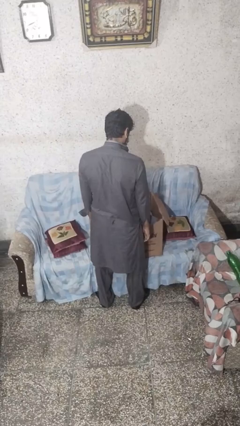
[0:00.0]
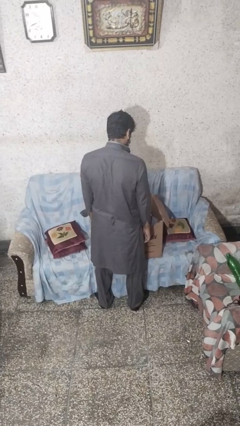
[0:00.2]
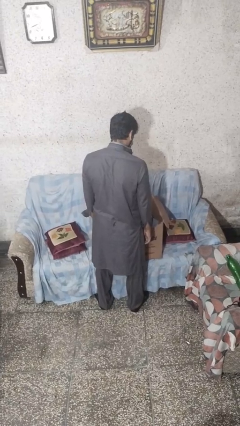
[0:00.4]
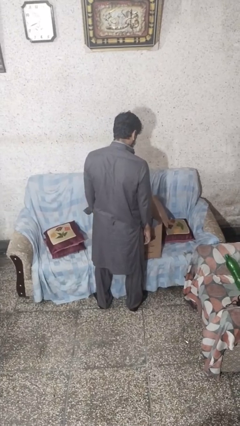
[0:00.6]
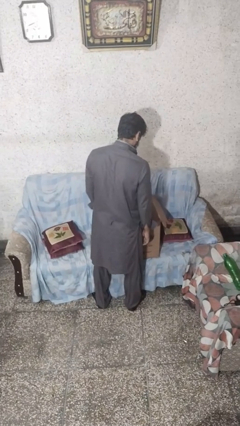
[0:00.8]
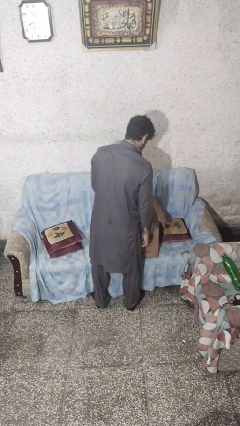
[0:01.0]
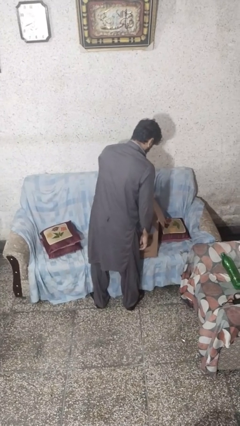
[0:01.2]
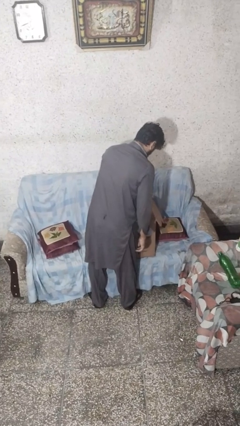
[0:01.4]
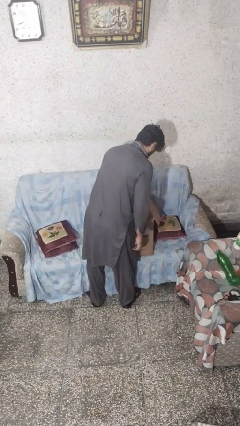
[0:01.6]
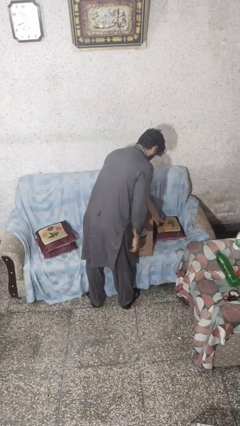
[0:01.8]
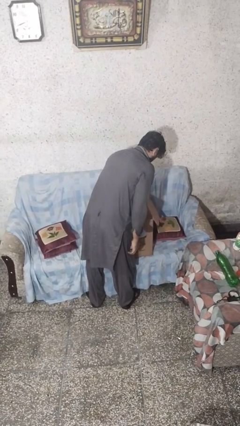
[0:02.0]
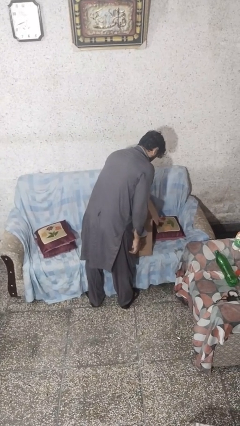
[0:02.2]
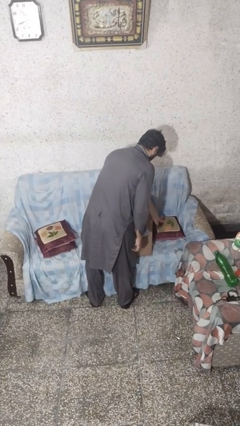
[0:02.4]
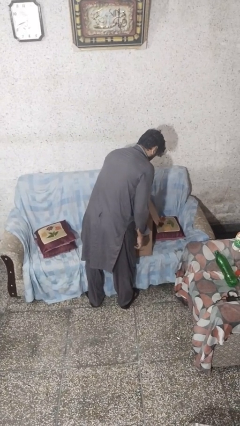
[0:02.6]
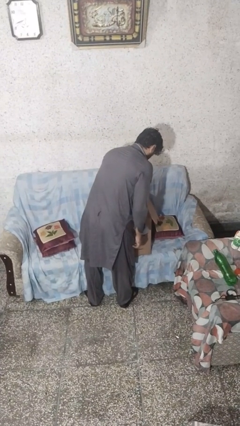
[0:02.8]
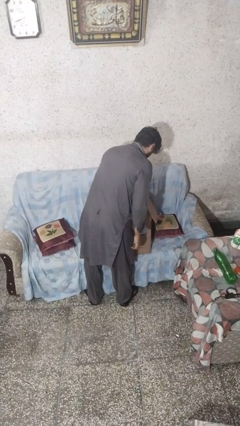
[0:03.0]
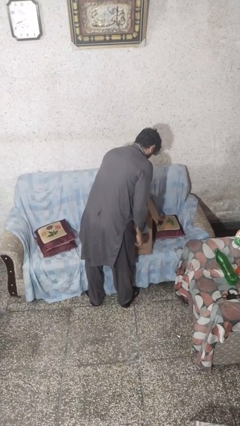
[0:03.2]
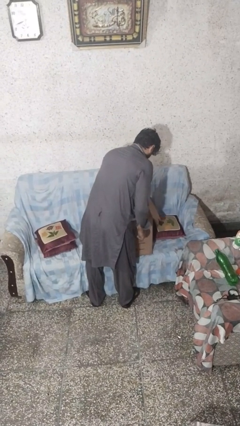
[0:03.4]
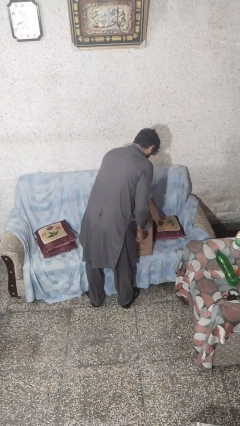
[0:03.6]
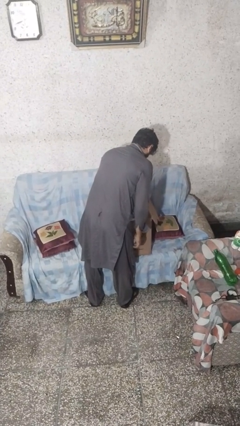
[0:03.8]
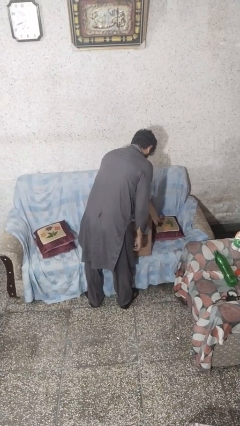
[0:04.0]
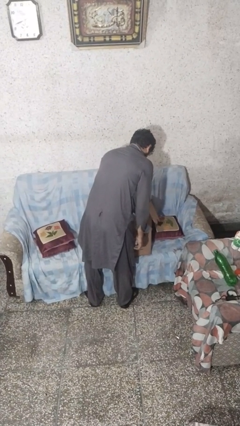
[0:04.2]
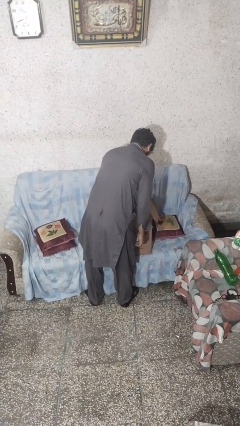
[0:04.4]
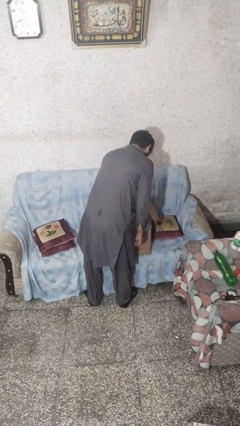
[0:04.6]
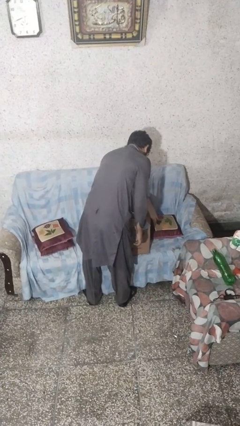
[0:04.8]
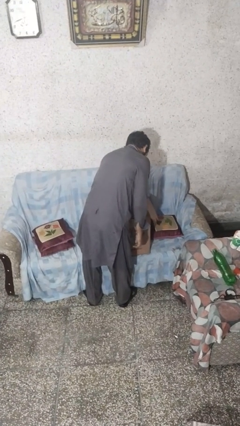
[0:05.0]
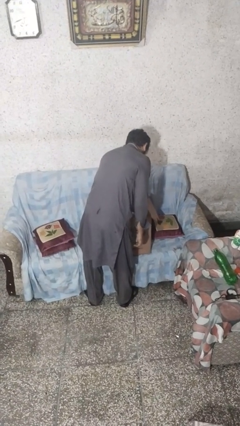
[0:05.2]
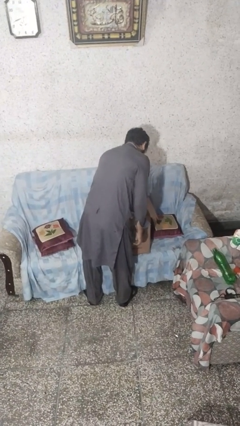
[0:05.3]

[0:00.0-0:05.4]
person searches in box

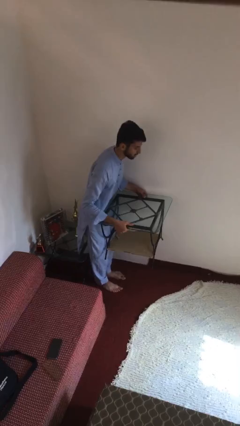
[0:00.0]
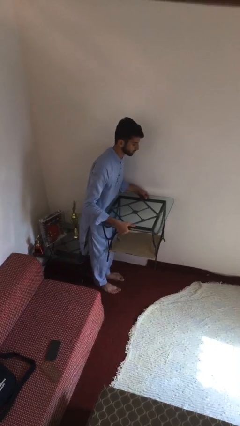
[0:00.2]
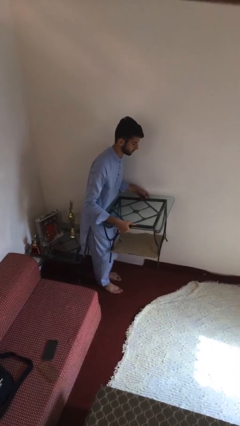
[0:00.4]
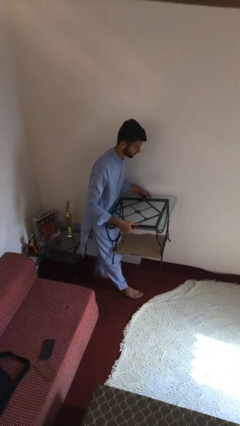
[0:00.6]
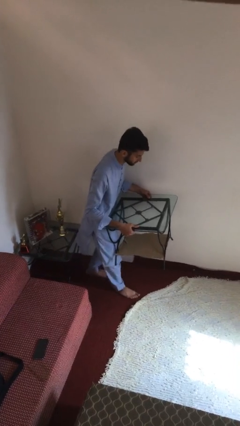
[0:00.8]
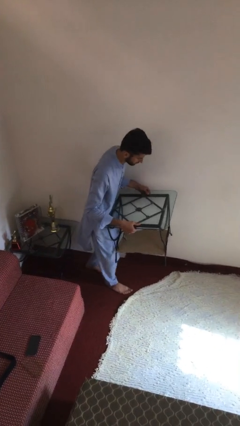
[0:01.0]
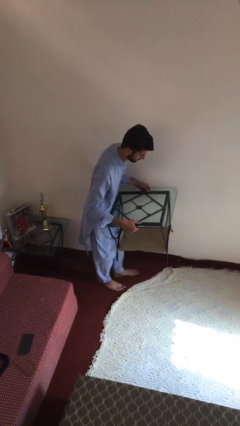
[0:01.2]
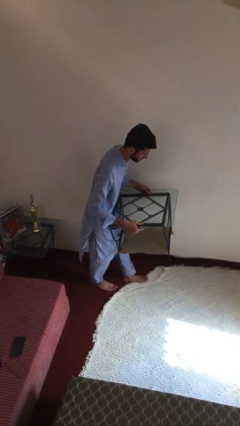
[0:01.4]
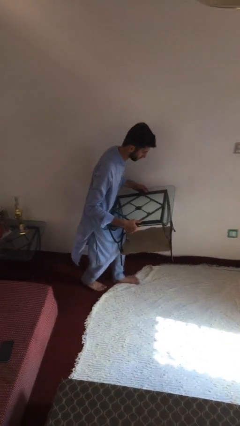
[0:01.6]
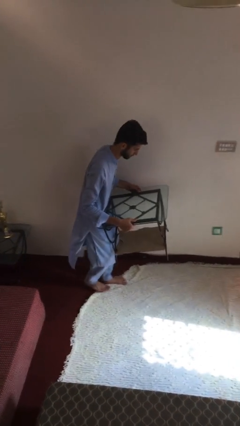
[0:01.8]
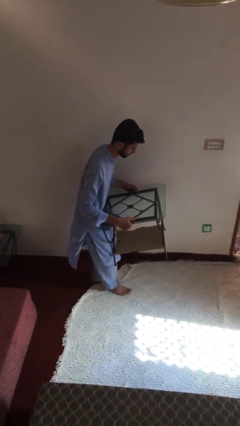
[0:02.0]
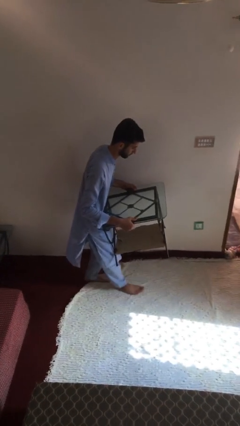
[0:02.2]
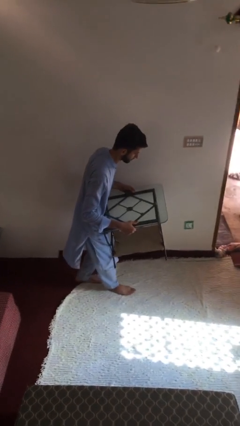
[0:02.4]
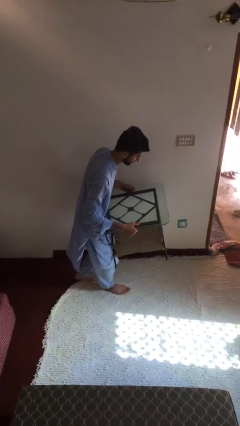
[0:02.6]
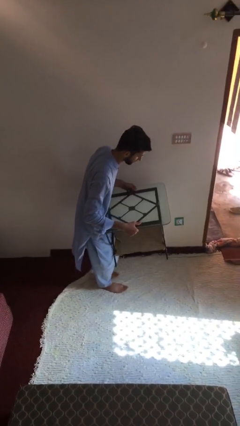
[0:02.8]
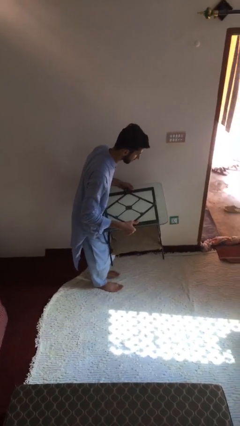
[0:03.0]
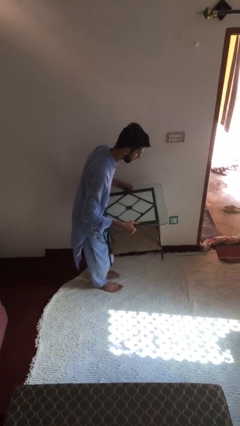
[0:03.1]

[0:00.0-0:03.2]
person carries heavy object

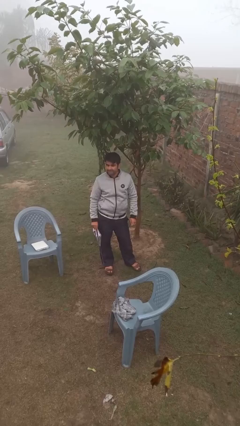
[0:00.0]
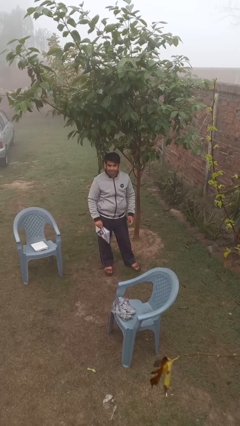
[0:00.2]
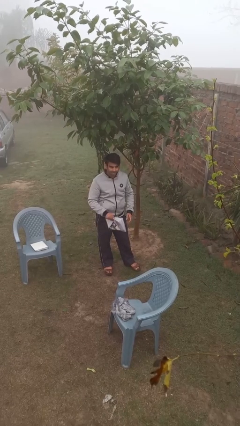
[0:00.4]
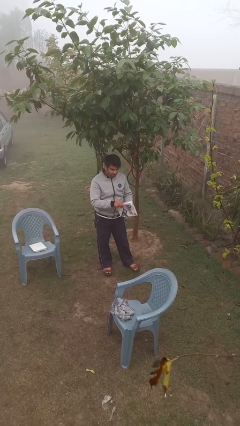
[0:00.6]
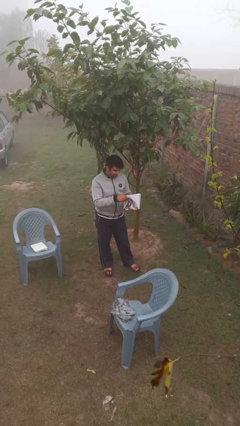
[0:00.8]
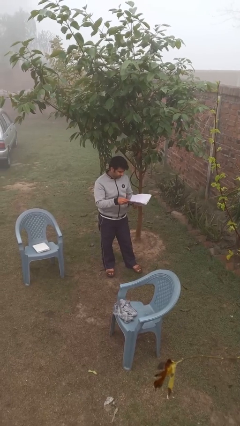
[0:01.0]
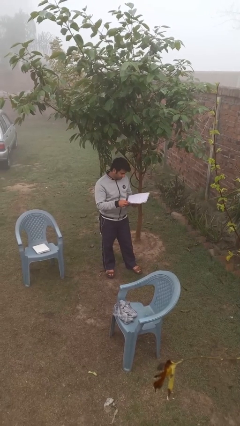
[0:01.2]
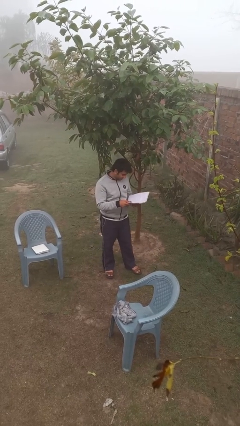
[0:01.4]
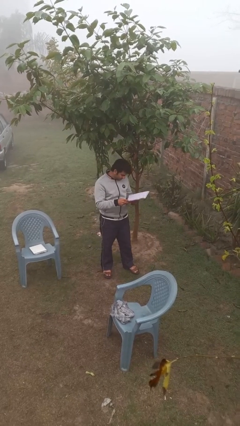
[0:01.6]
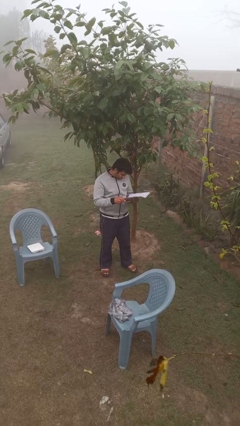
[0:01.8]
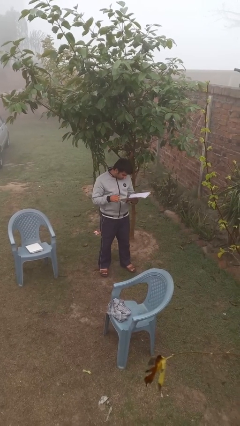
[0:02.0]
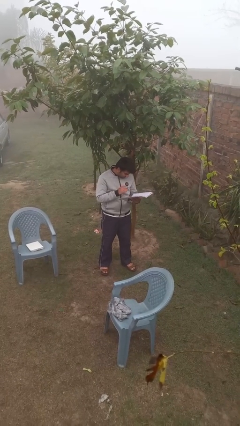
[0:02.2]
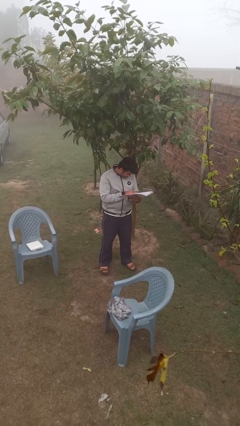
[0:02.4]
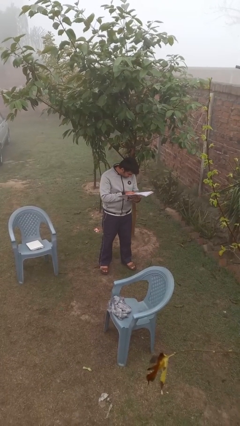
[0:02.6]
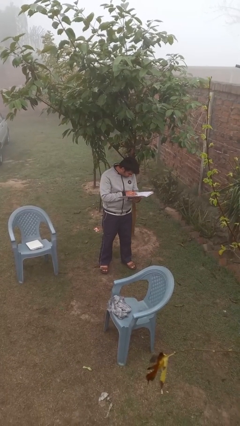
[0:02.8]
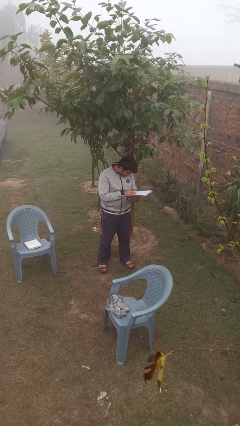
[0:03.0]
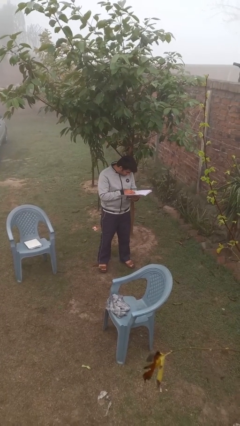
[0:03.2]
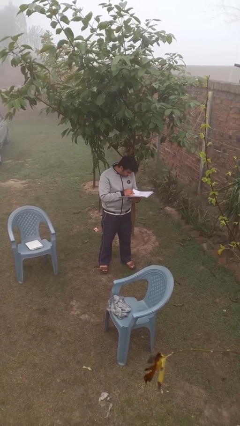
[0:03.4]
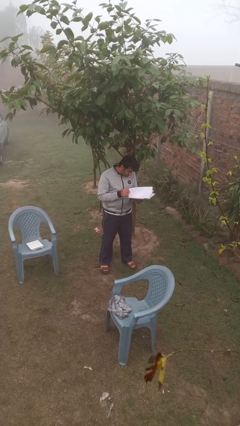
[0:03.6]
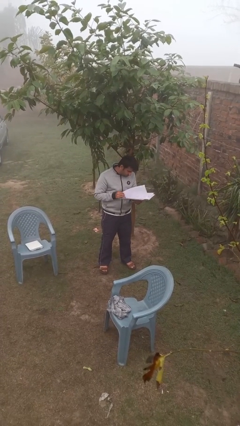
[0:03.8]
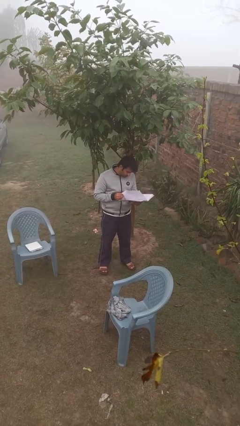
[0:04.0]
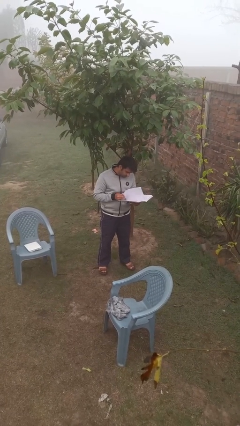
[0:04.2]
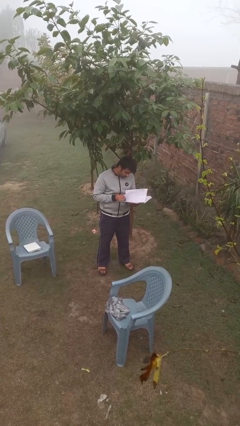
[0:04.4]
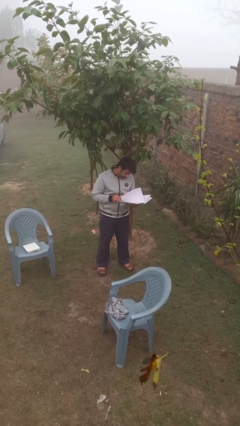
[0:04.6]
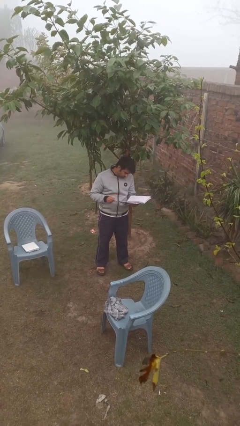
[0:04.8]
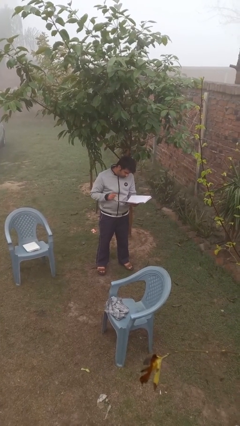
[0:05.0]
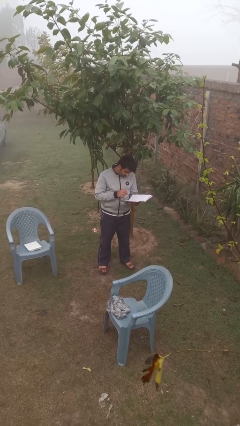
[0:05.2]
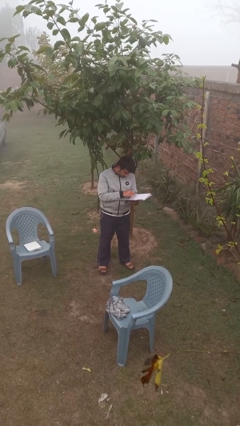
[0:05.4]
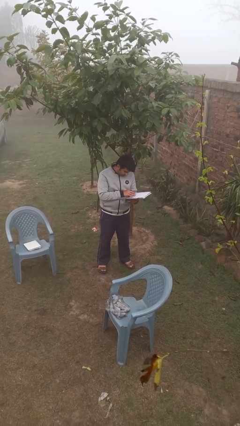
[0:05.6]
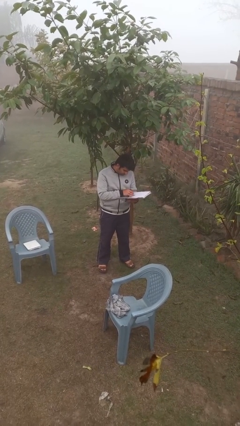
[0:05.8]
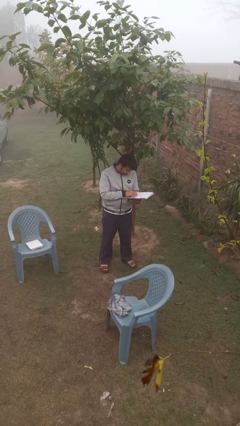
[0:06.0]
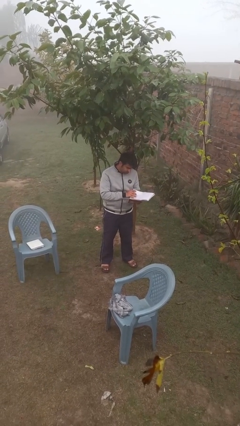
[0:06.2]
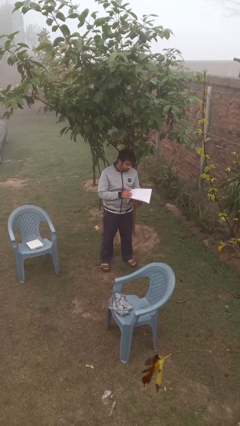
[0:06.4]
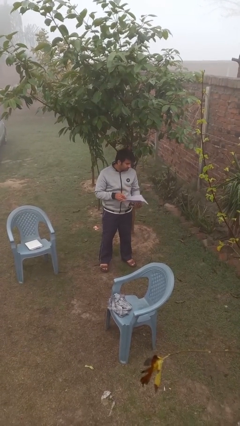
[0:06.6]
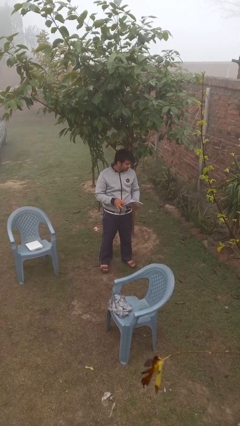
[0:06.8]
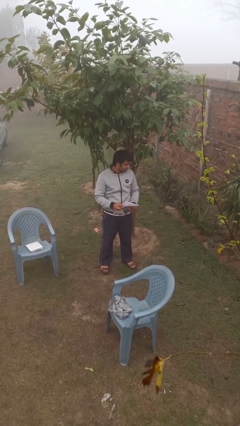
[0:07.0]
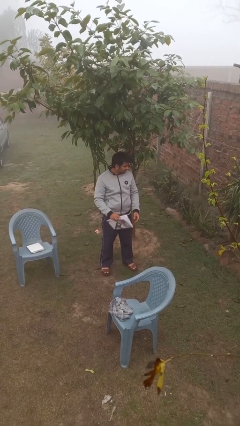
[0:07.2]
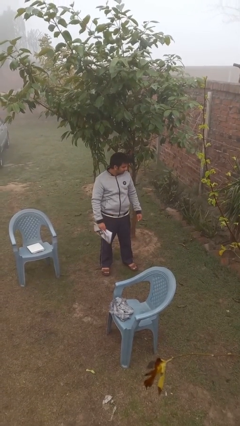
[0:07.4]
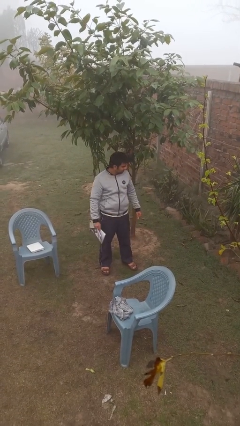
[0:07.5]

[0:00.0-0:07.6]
person reads document

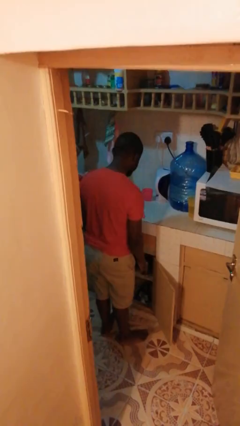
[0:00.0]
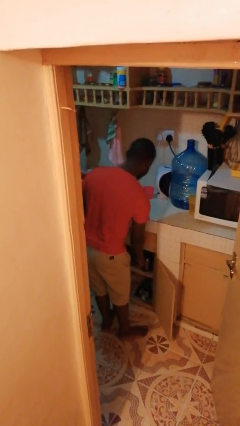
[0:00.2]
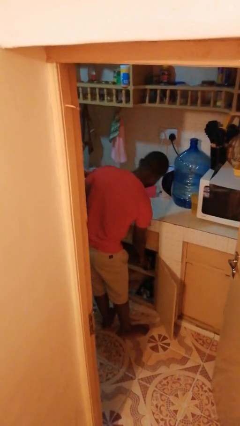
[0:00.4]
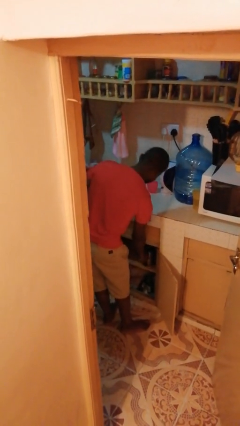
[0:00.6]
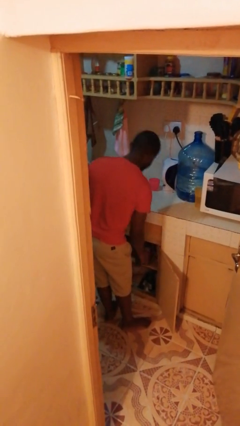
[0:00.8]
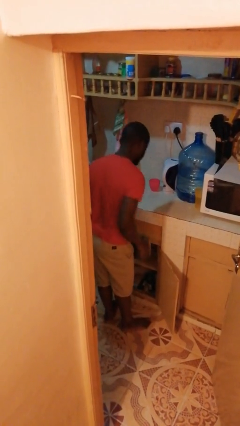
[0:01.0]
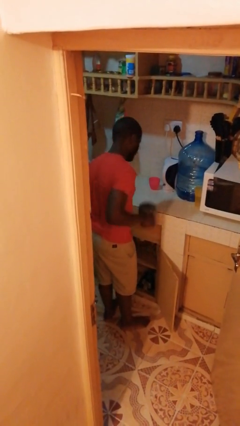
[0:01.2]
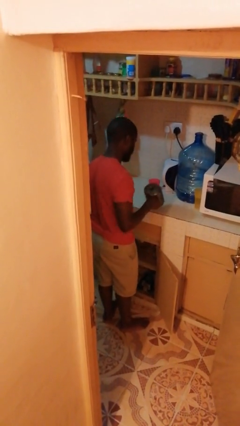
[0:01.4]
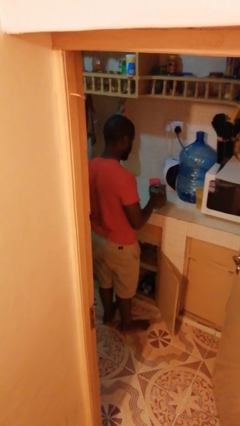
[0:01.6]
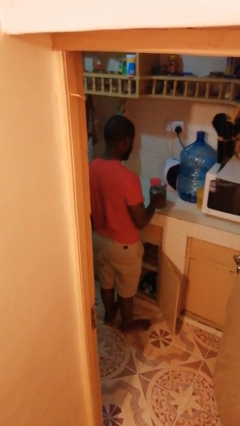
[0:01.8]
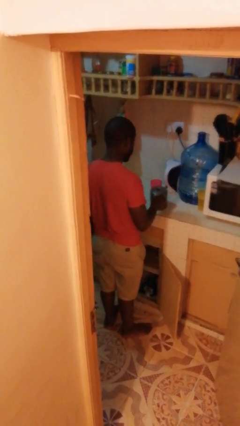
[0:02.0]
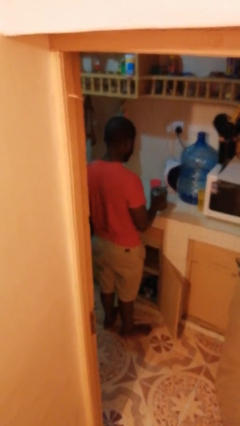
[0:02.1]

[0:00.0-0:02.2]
person takes object from cabinet
